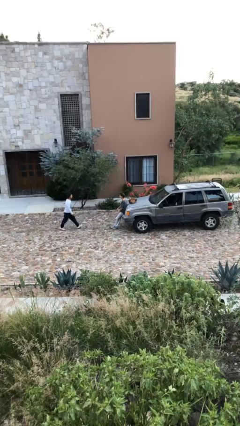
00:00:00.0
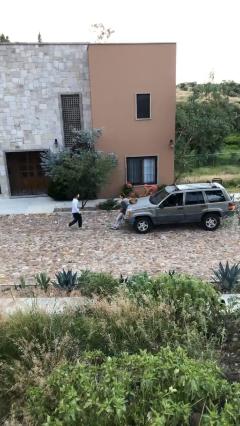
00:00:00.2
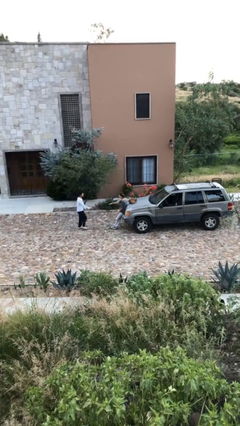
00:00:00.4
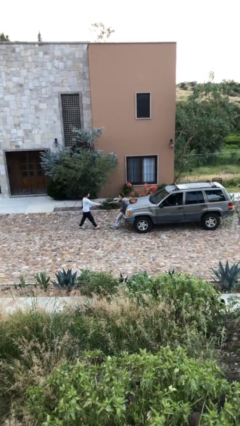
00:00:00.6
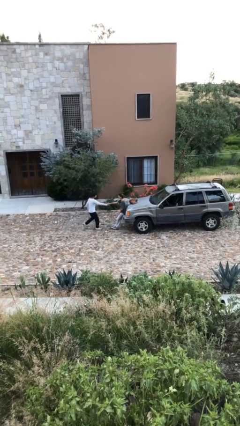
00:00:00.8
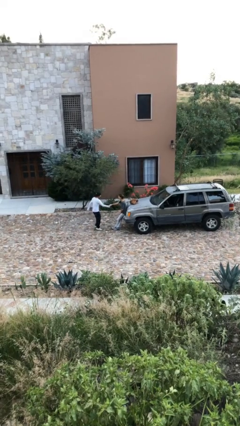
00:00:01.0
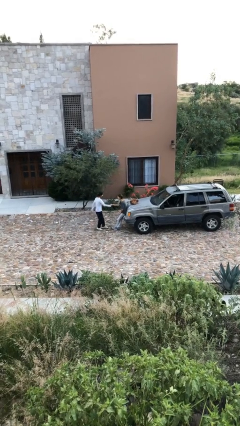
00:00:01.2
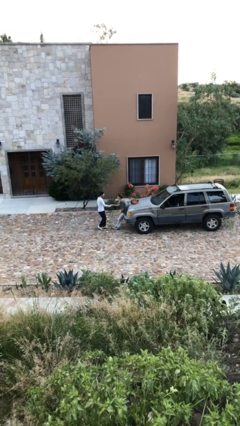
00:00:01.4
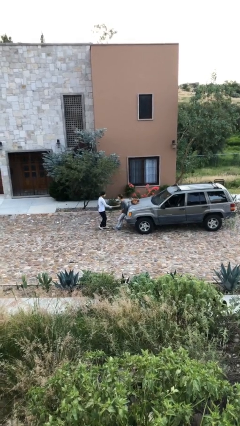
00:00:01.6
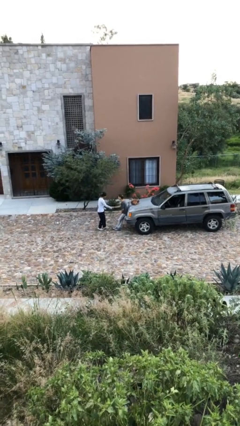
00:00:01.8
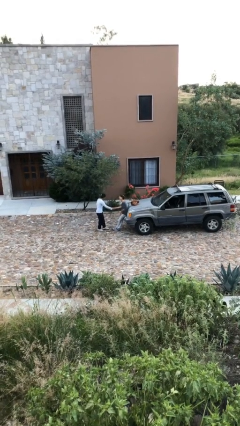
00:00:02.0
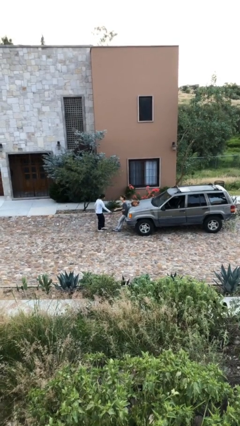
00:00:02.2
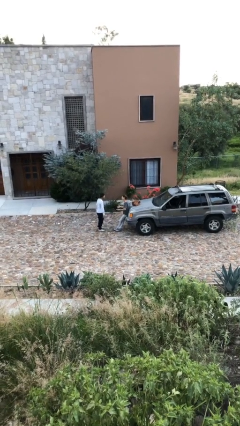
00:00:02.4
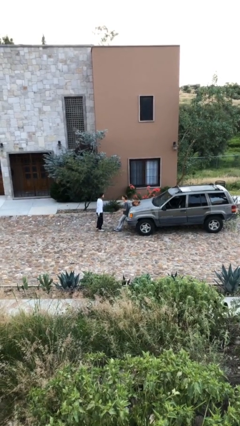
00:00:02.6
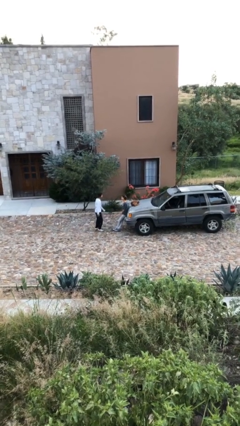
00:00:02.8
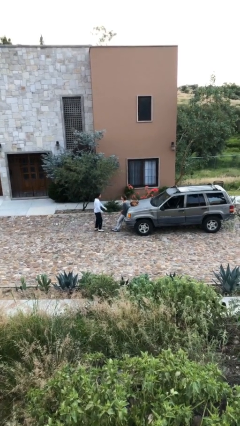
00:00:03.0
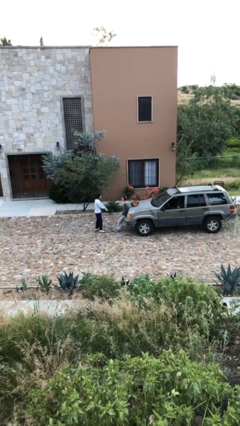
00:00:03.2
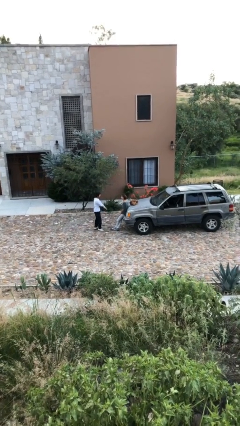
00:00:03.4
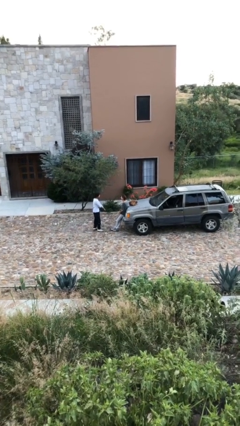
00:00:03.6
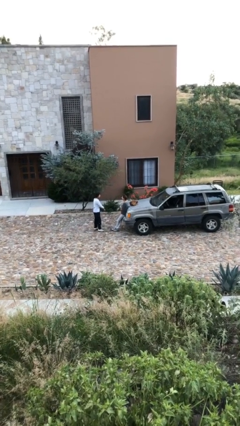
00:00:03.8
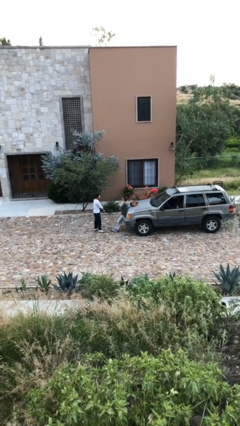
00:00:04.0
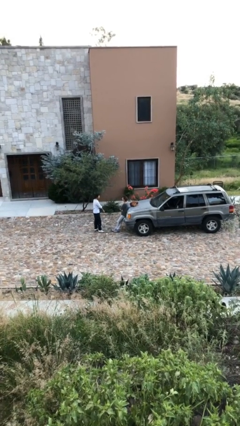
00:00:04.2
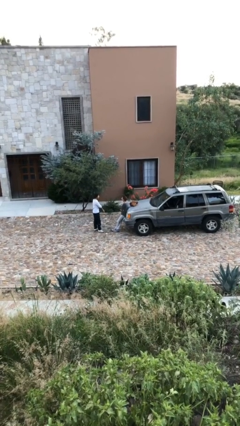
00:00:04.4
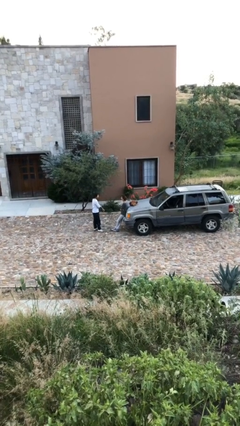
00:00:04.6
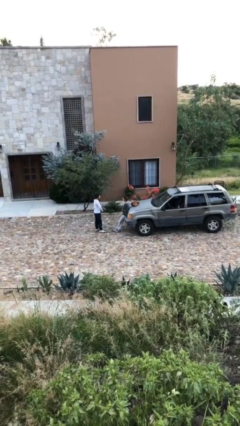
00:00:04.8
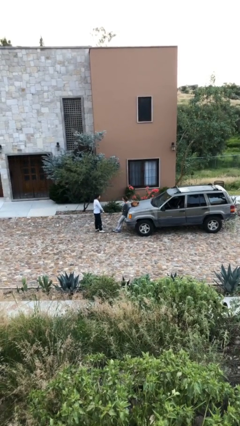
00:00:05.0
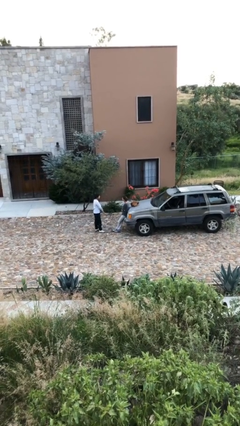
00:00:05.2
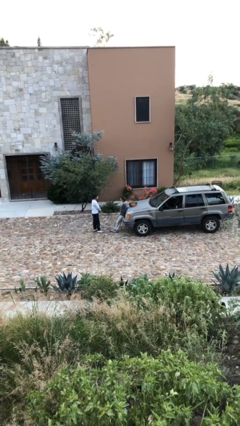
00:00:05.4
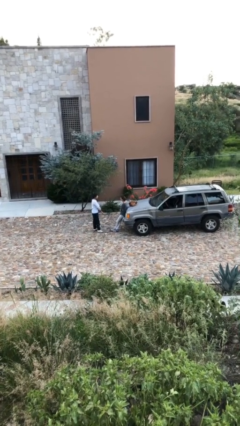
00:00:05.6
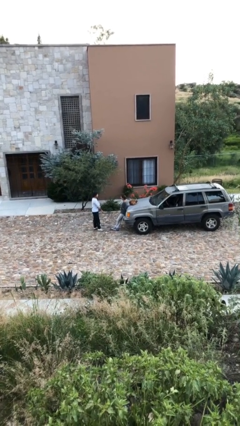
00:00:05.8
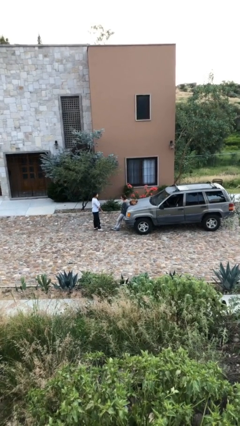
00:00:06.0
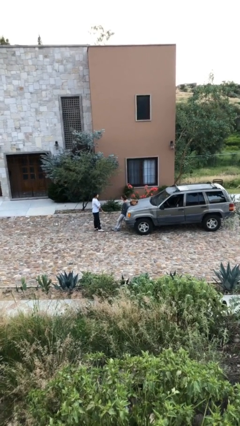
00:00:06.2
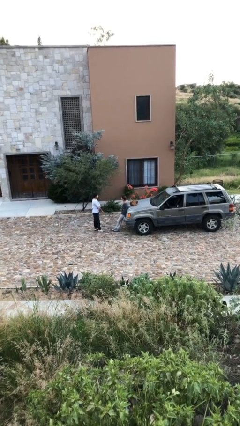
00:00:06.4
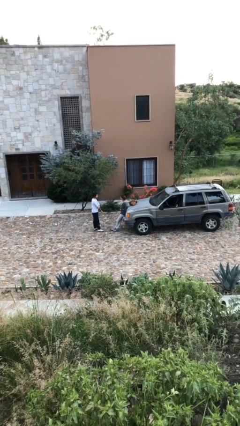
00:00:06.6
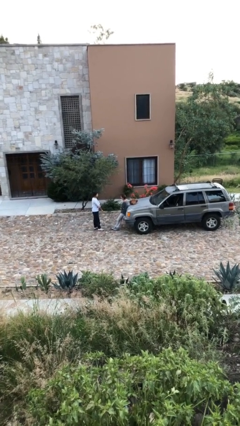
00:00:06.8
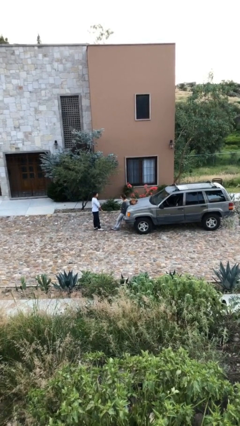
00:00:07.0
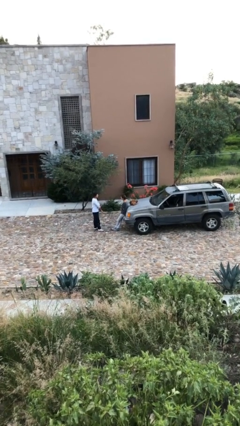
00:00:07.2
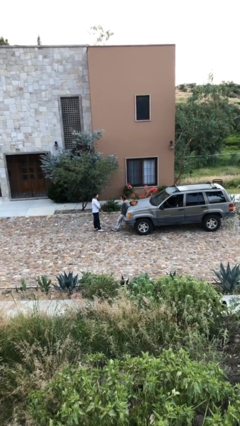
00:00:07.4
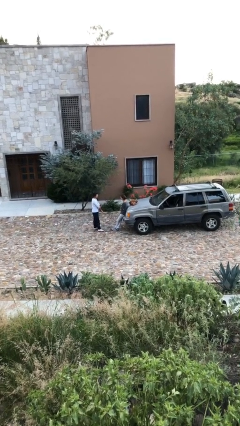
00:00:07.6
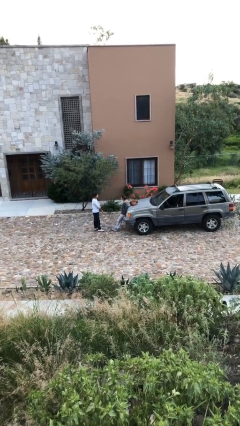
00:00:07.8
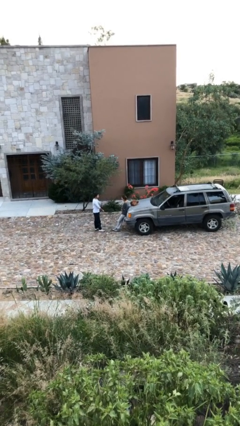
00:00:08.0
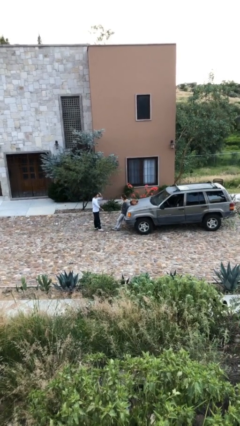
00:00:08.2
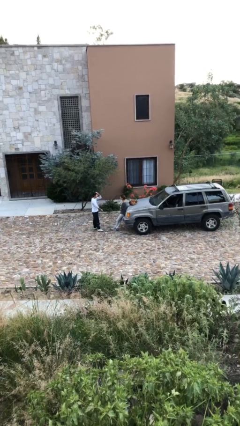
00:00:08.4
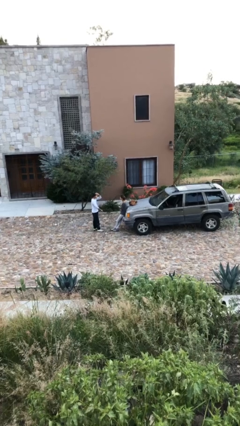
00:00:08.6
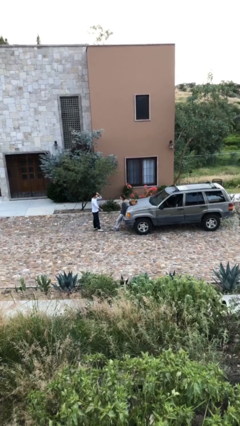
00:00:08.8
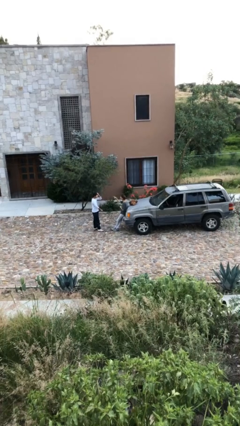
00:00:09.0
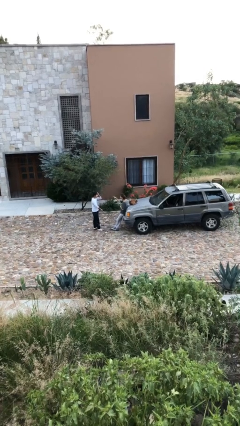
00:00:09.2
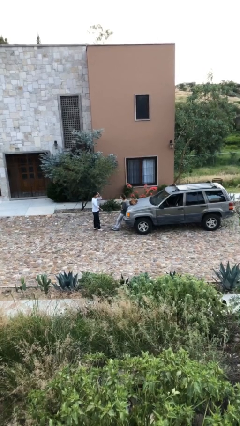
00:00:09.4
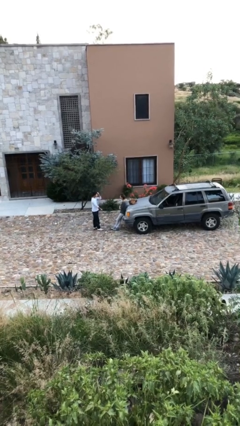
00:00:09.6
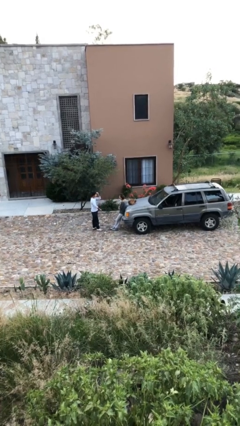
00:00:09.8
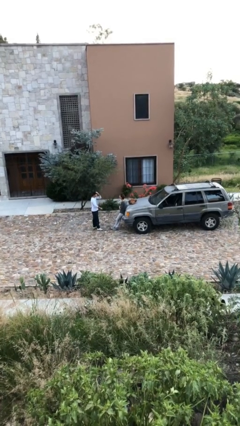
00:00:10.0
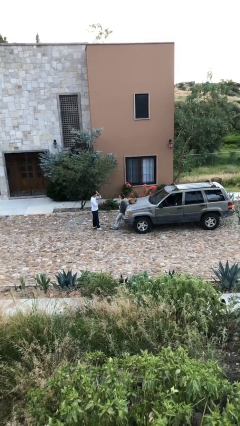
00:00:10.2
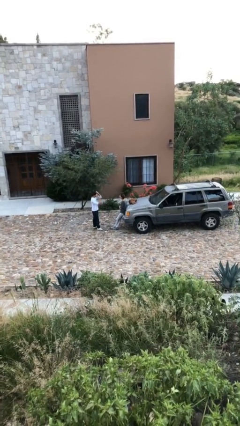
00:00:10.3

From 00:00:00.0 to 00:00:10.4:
person shakes hand

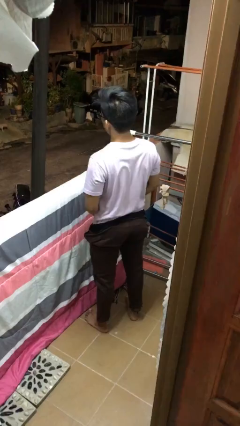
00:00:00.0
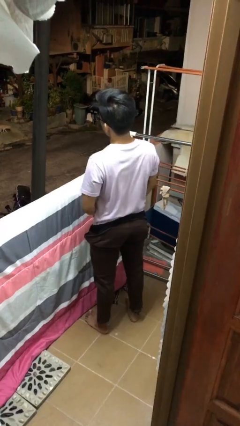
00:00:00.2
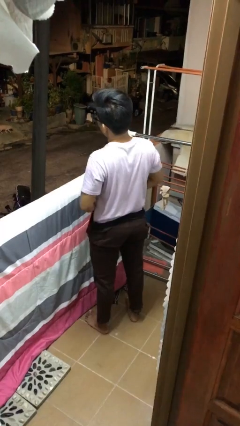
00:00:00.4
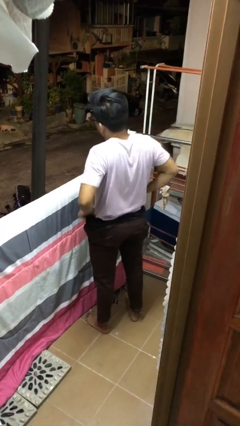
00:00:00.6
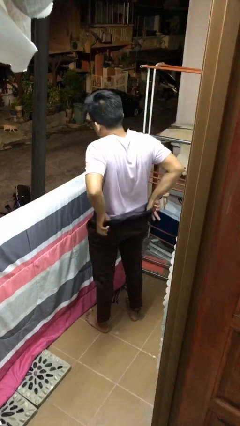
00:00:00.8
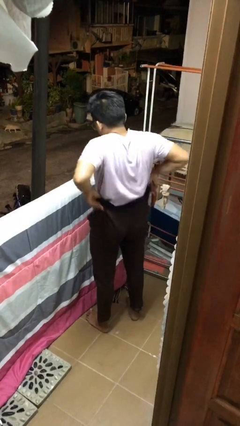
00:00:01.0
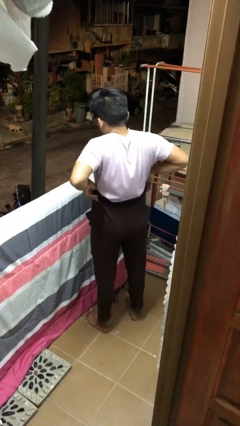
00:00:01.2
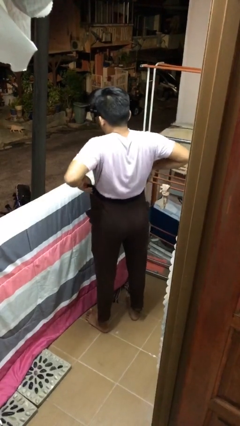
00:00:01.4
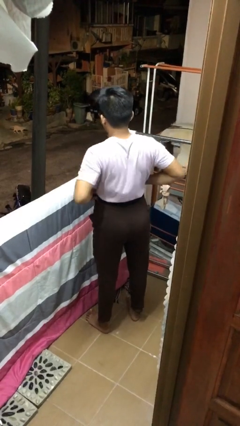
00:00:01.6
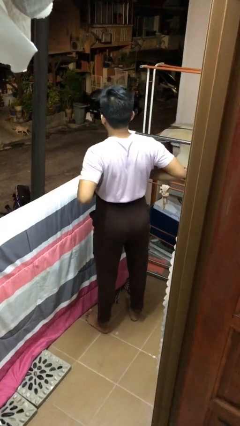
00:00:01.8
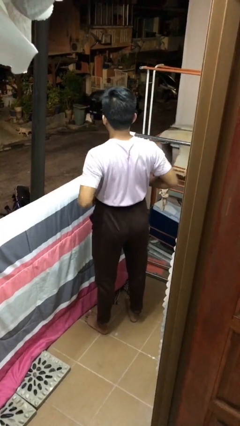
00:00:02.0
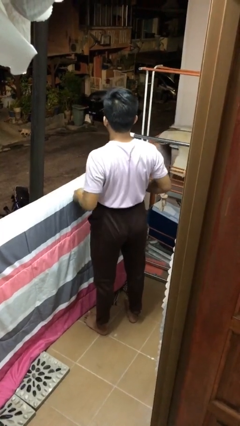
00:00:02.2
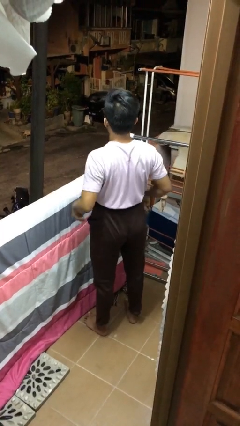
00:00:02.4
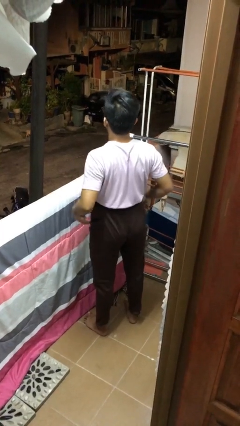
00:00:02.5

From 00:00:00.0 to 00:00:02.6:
person hikes up pants

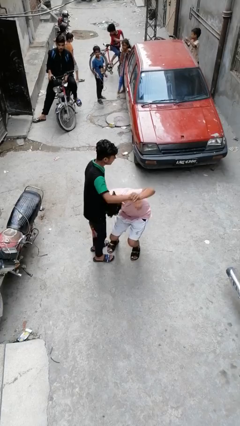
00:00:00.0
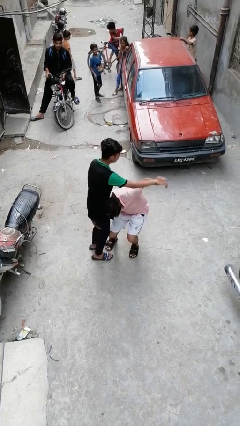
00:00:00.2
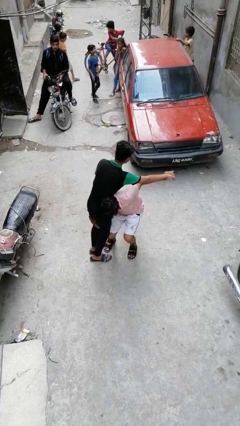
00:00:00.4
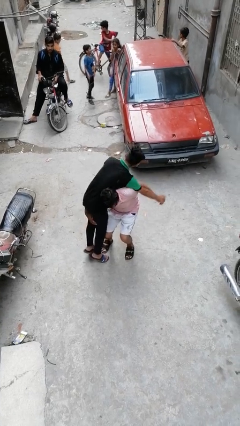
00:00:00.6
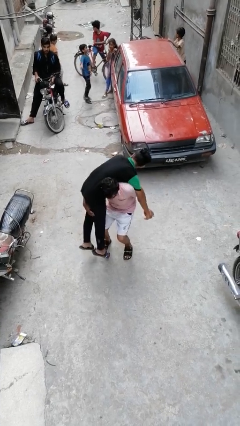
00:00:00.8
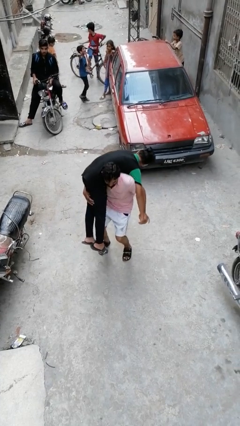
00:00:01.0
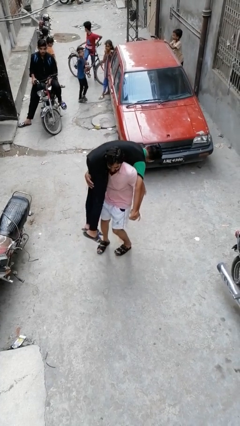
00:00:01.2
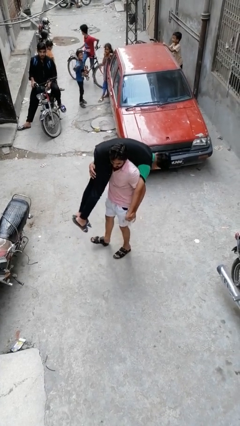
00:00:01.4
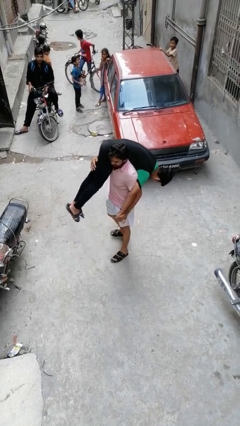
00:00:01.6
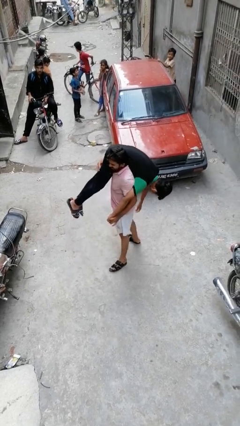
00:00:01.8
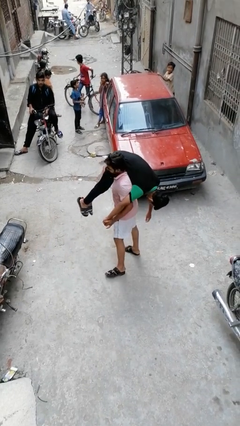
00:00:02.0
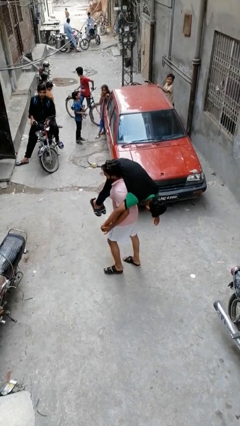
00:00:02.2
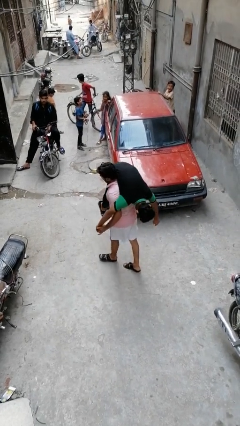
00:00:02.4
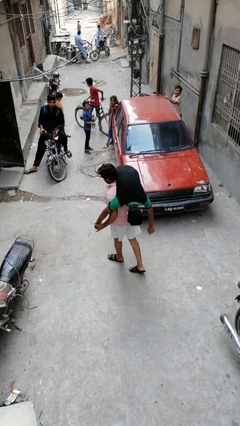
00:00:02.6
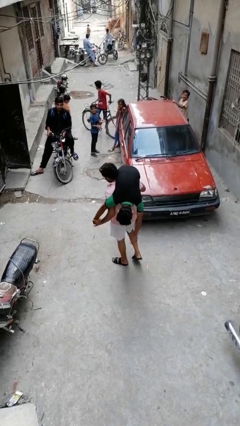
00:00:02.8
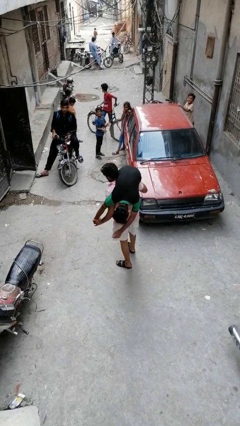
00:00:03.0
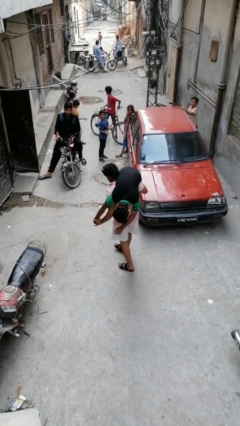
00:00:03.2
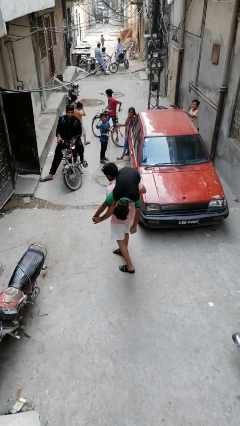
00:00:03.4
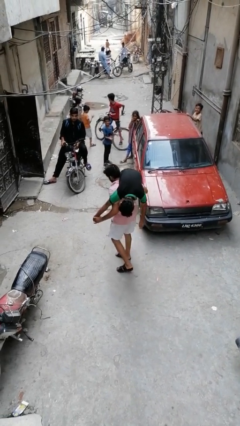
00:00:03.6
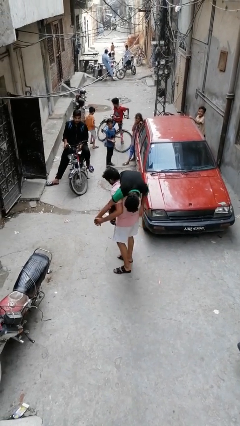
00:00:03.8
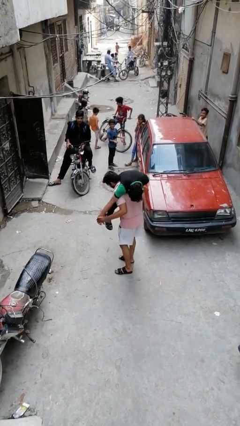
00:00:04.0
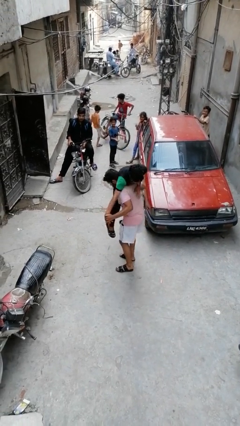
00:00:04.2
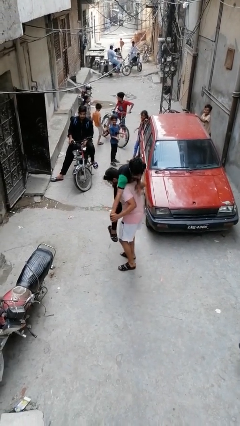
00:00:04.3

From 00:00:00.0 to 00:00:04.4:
person carries person over shoulder

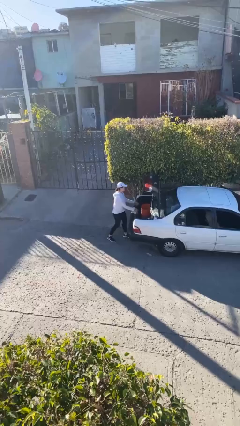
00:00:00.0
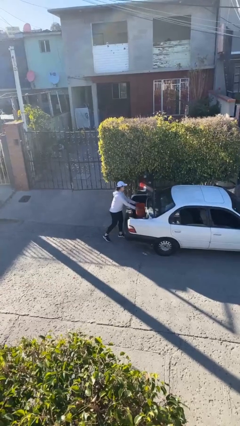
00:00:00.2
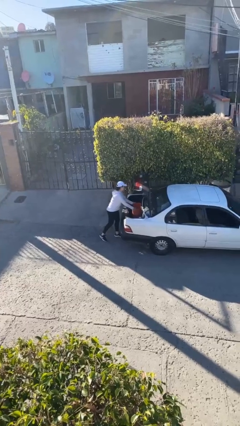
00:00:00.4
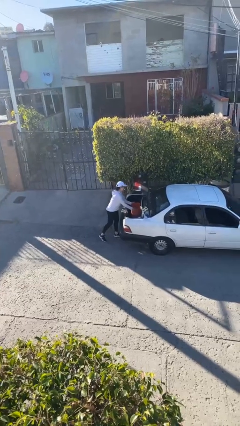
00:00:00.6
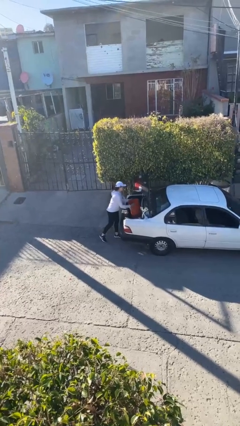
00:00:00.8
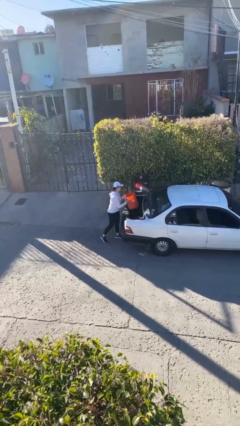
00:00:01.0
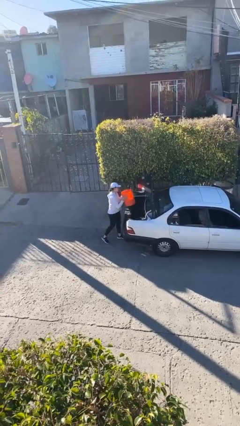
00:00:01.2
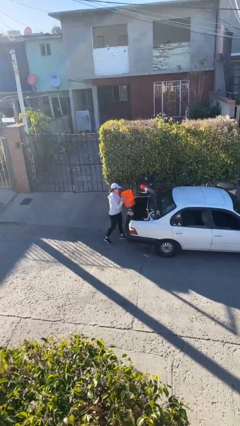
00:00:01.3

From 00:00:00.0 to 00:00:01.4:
person unloads car
